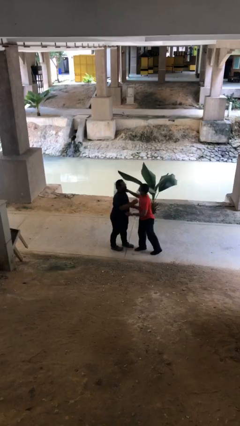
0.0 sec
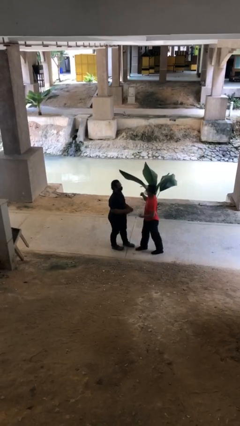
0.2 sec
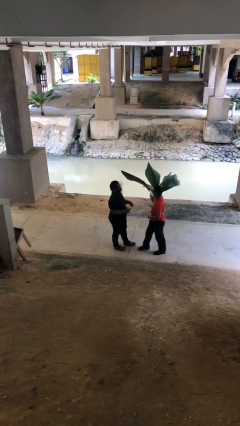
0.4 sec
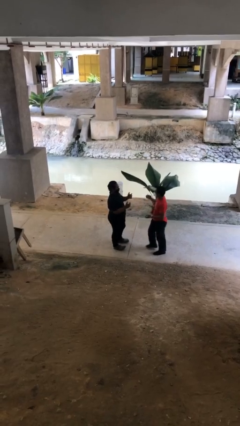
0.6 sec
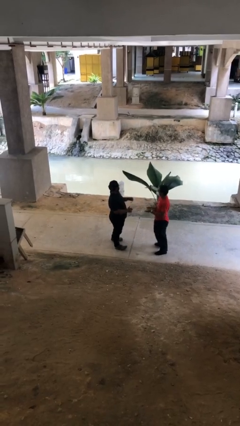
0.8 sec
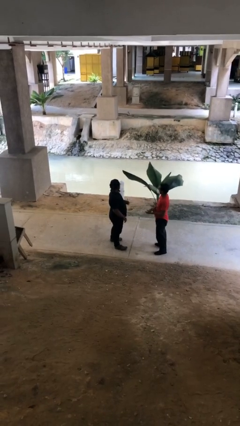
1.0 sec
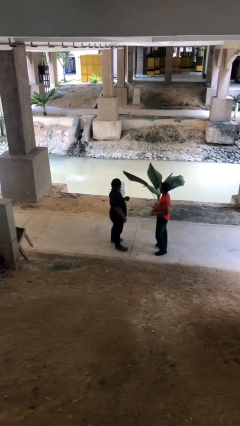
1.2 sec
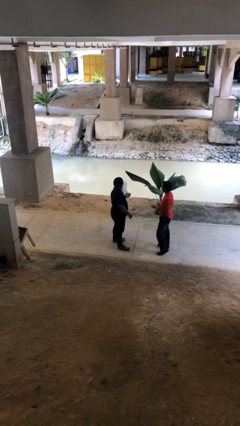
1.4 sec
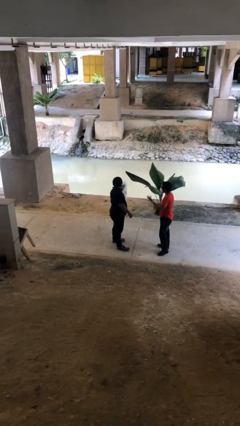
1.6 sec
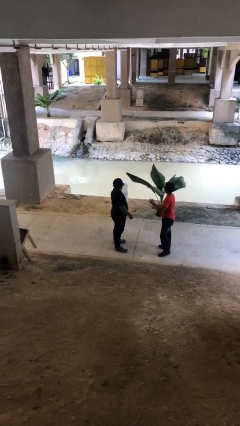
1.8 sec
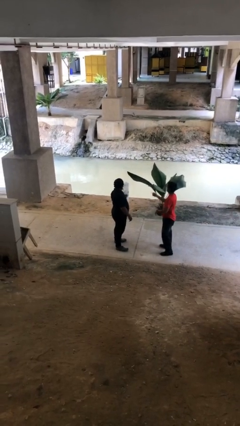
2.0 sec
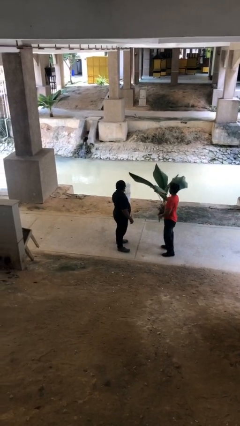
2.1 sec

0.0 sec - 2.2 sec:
person talks to person

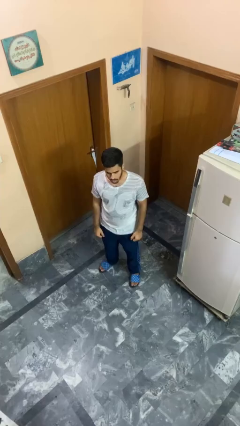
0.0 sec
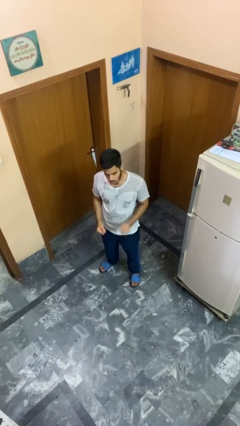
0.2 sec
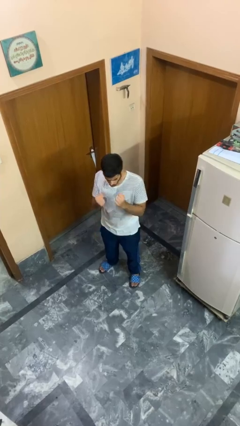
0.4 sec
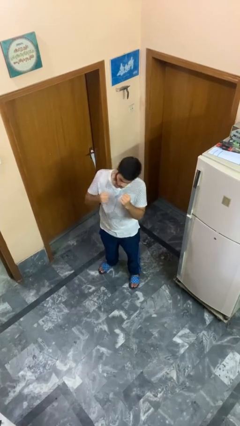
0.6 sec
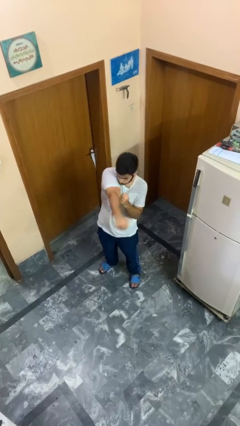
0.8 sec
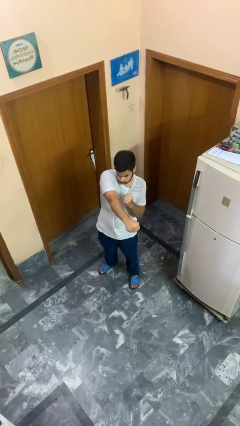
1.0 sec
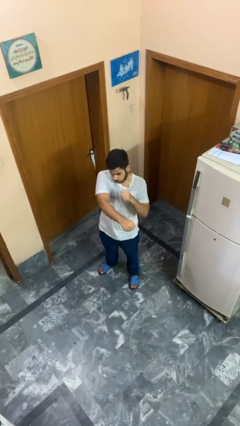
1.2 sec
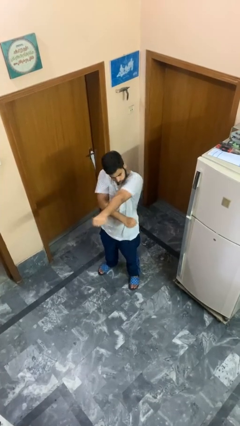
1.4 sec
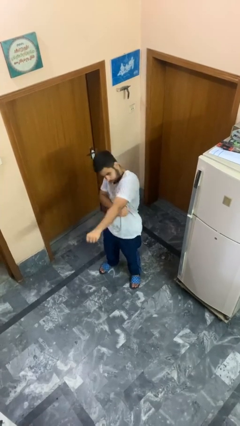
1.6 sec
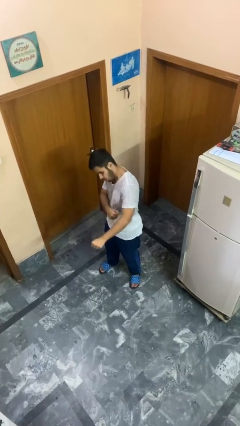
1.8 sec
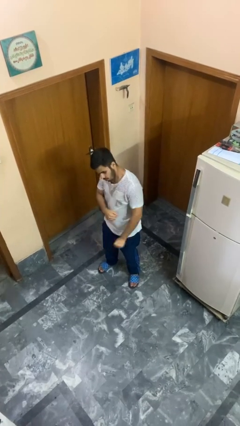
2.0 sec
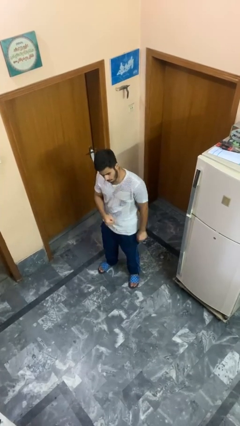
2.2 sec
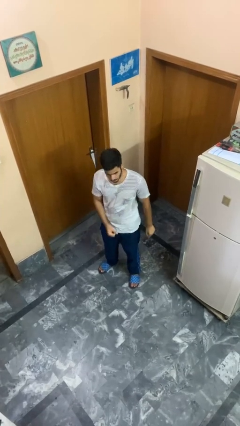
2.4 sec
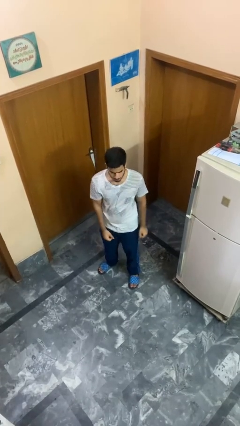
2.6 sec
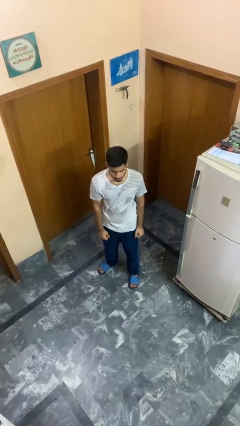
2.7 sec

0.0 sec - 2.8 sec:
person punches

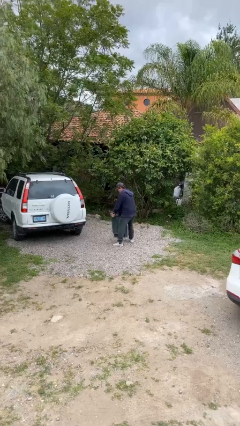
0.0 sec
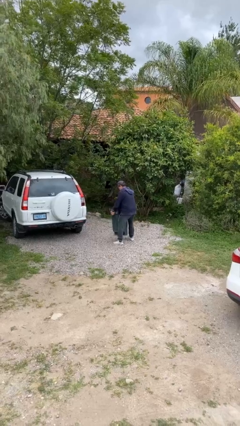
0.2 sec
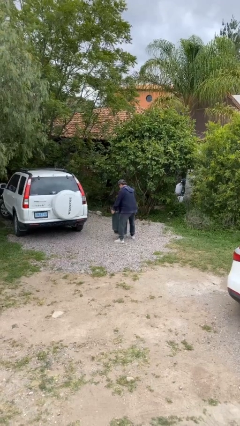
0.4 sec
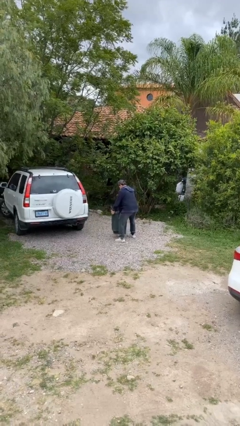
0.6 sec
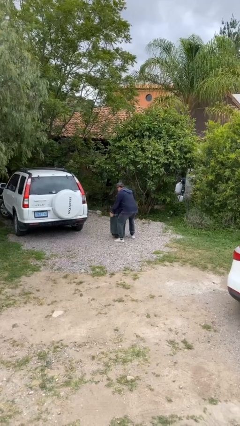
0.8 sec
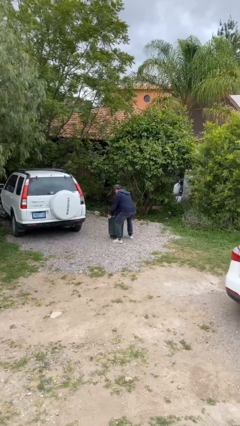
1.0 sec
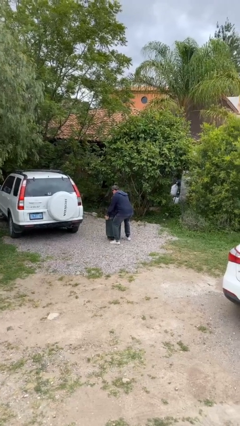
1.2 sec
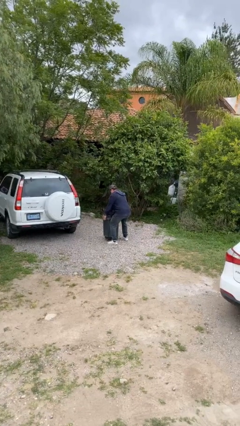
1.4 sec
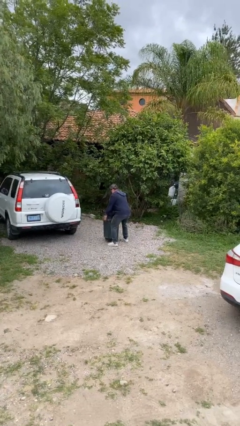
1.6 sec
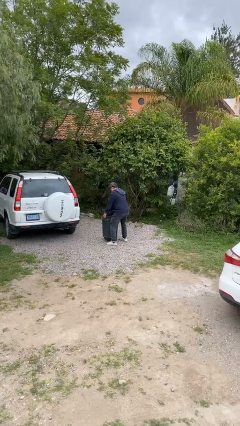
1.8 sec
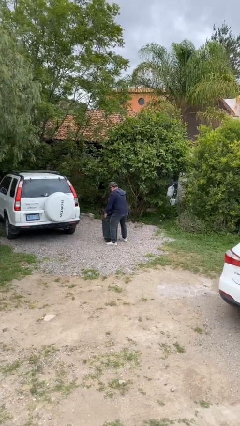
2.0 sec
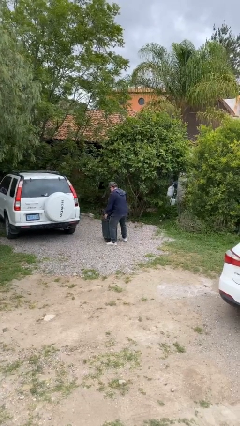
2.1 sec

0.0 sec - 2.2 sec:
person puts down object on floor

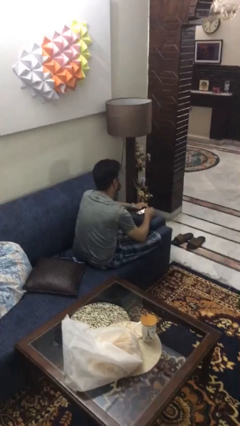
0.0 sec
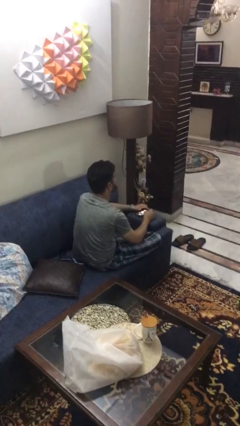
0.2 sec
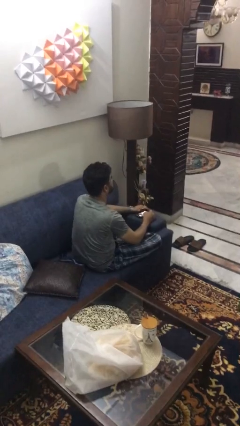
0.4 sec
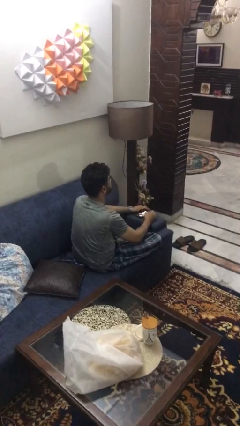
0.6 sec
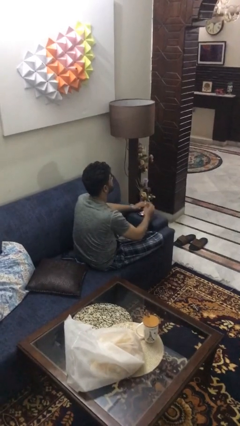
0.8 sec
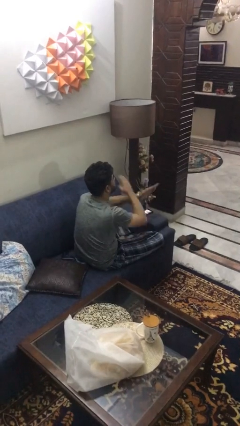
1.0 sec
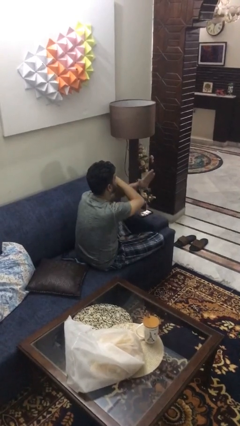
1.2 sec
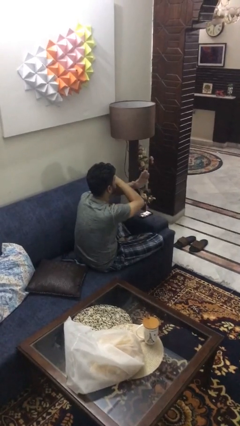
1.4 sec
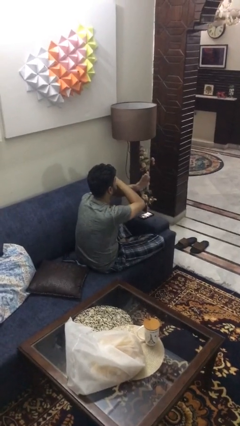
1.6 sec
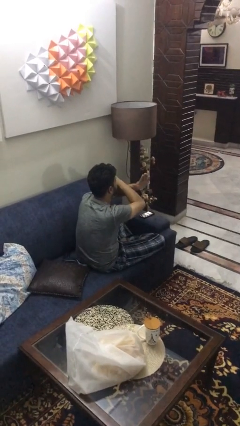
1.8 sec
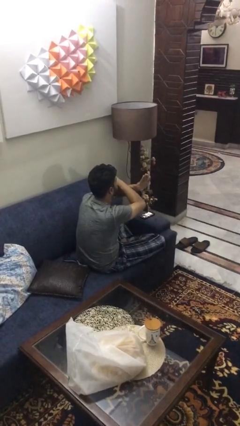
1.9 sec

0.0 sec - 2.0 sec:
person gestures arms x

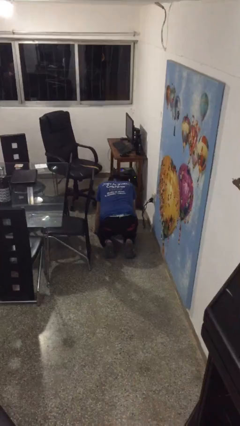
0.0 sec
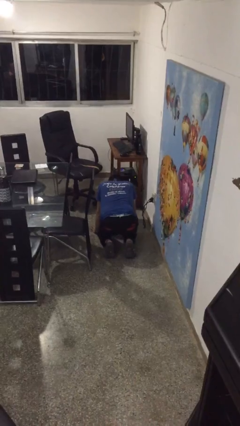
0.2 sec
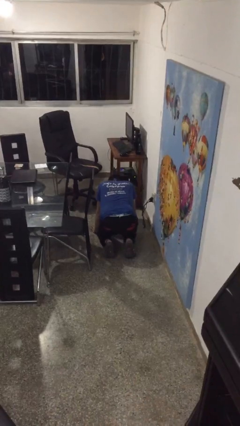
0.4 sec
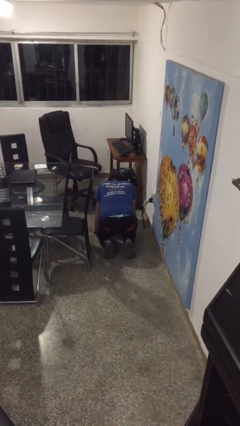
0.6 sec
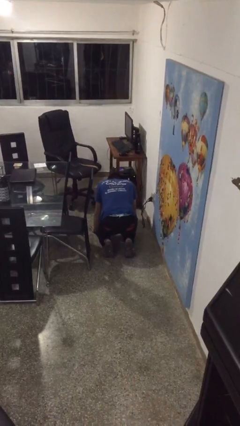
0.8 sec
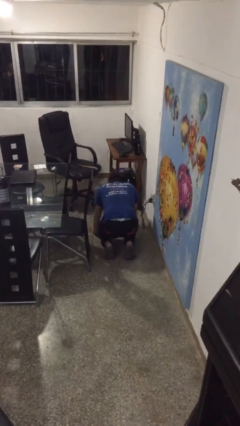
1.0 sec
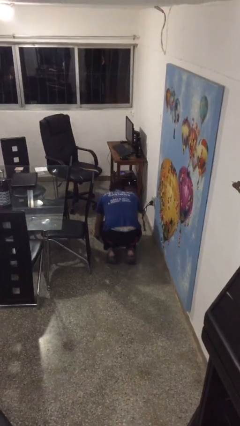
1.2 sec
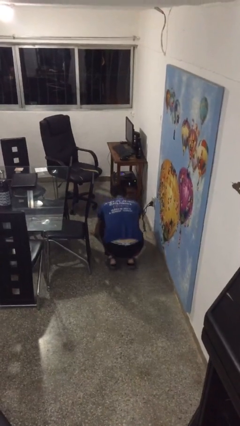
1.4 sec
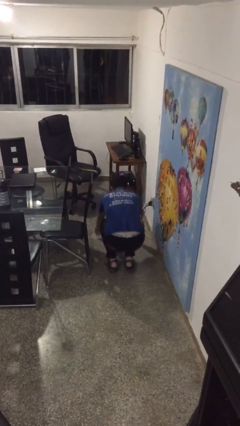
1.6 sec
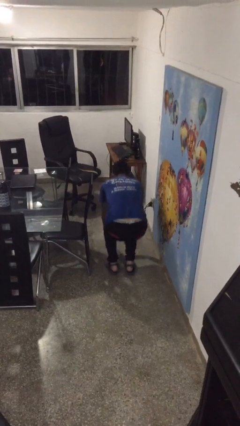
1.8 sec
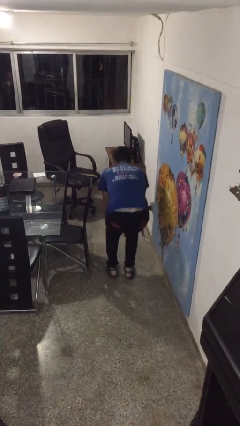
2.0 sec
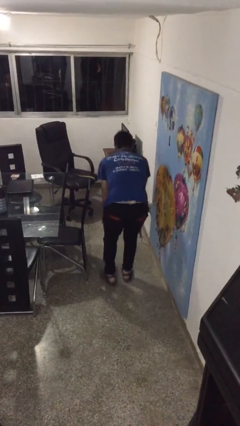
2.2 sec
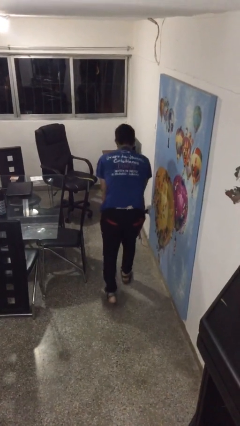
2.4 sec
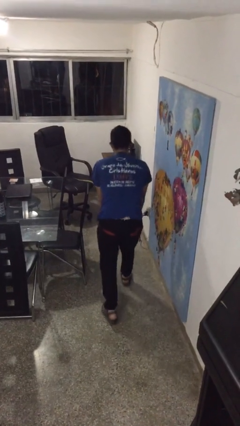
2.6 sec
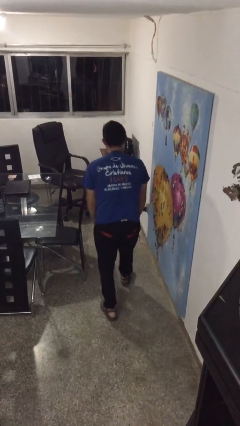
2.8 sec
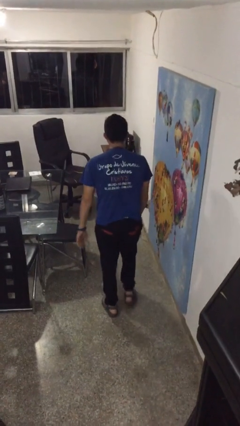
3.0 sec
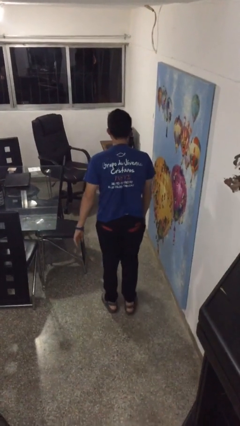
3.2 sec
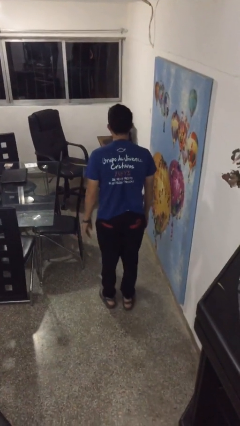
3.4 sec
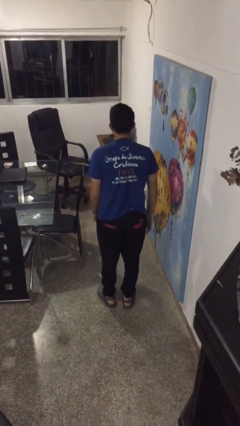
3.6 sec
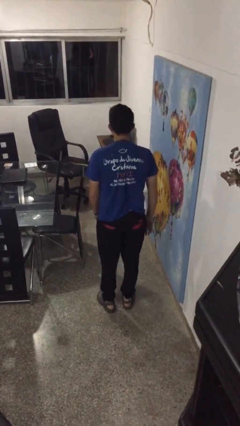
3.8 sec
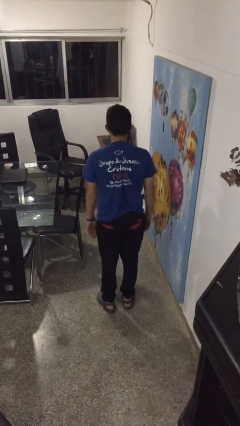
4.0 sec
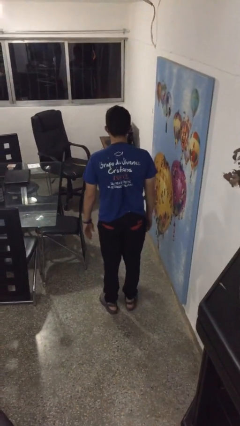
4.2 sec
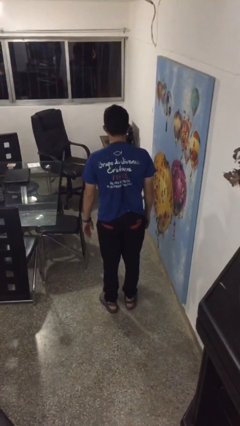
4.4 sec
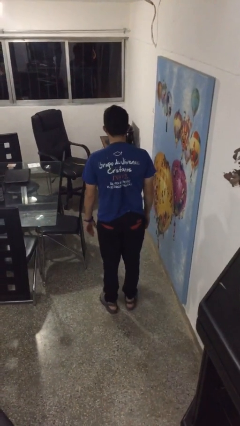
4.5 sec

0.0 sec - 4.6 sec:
person stands up from floor

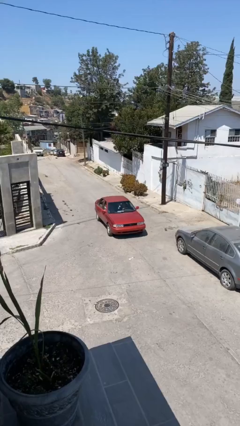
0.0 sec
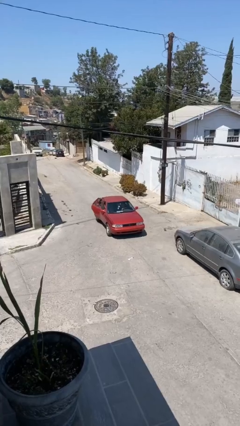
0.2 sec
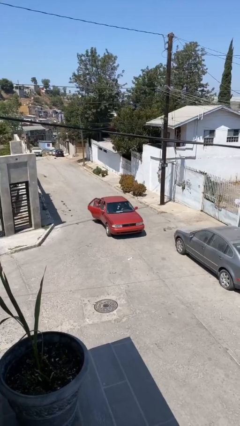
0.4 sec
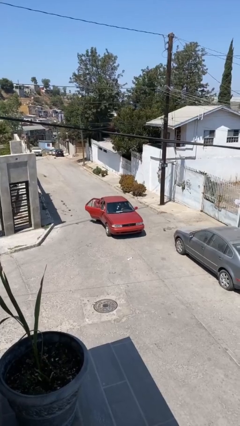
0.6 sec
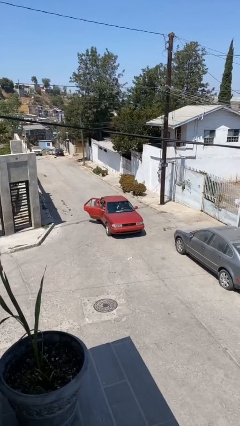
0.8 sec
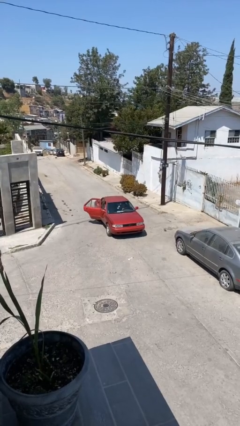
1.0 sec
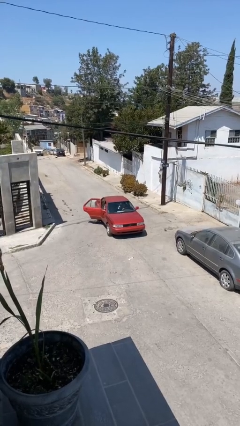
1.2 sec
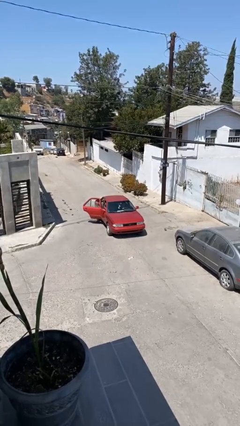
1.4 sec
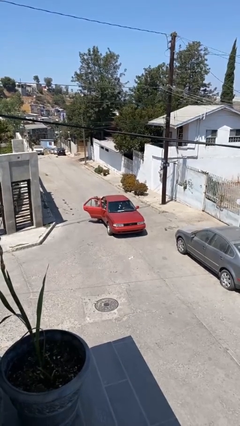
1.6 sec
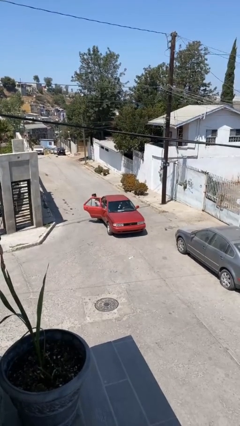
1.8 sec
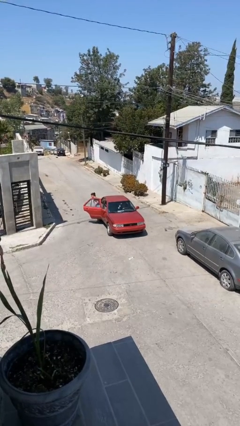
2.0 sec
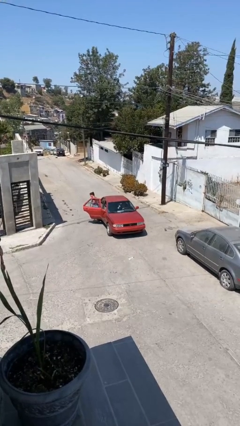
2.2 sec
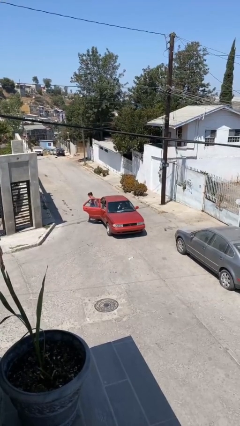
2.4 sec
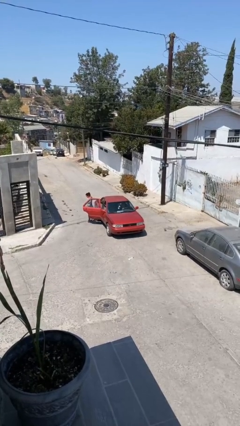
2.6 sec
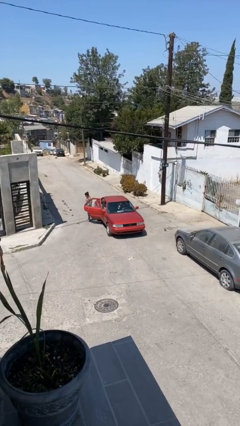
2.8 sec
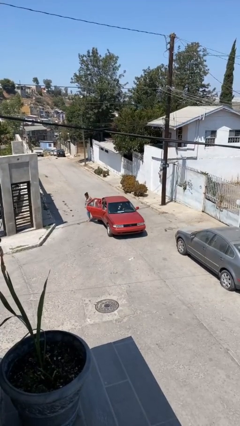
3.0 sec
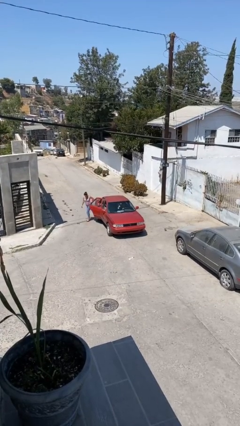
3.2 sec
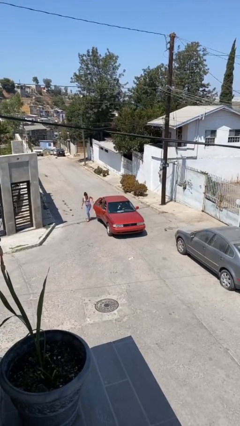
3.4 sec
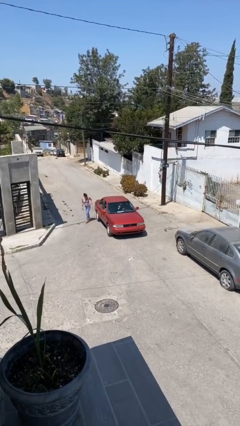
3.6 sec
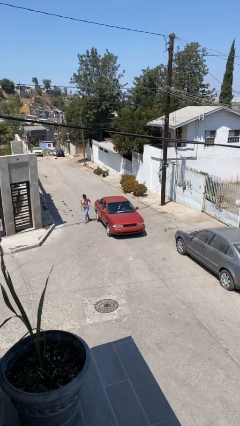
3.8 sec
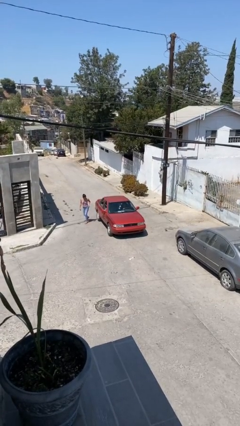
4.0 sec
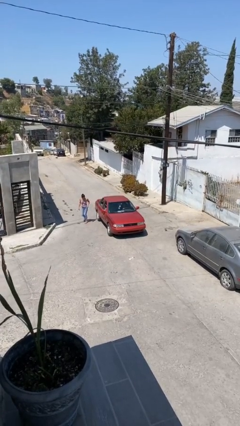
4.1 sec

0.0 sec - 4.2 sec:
car drops off person
